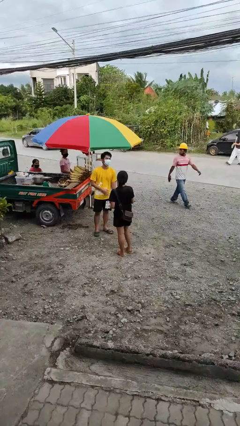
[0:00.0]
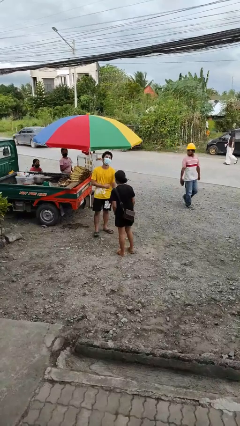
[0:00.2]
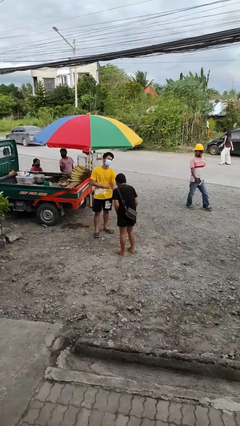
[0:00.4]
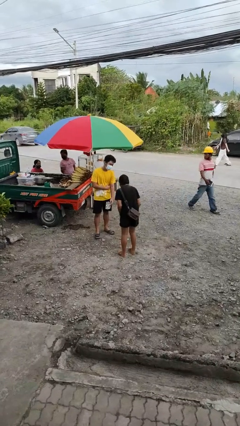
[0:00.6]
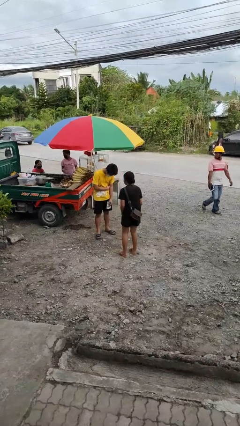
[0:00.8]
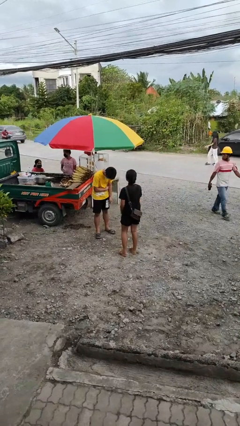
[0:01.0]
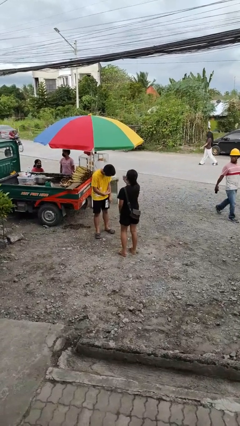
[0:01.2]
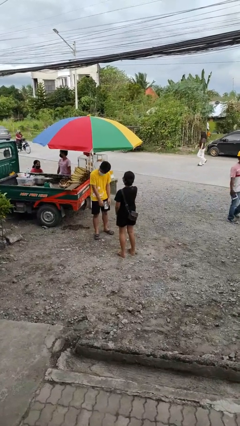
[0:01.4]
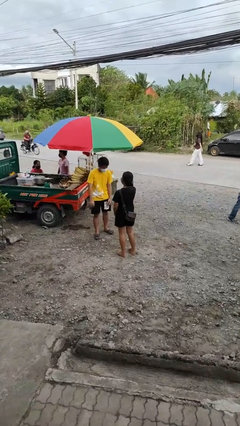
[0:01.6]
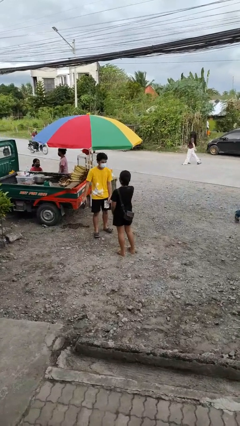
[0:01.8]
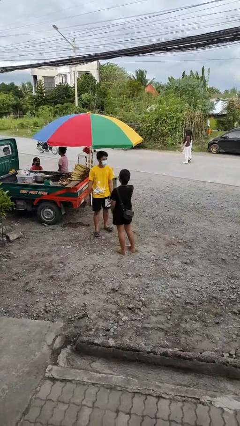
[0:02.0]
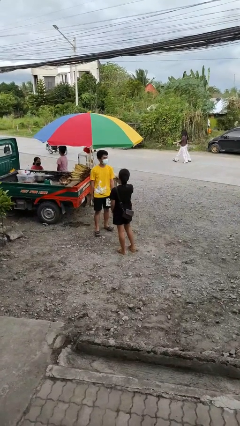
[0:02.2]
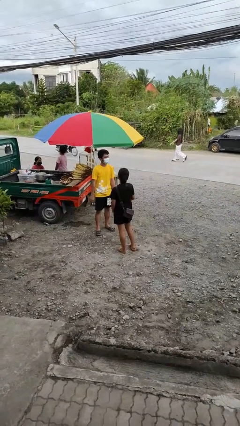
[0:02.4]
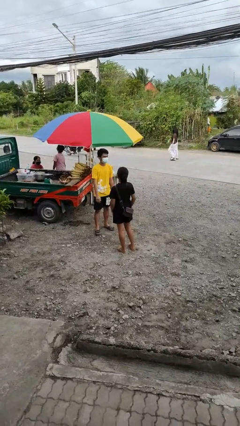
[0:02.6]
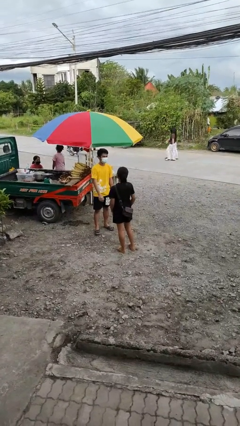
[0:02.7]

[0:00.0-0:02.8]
person laughs with person

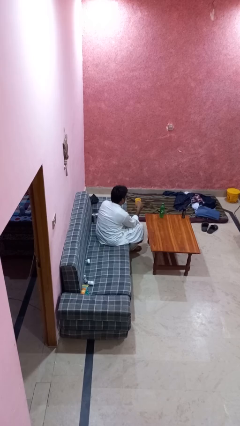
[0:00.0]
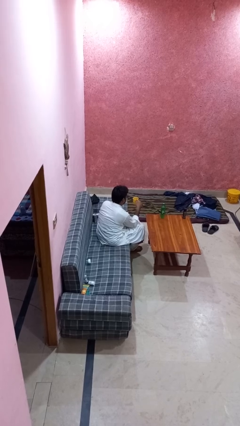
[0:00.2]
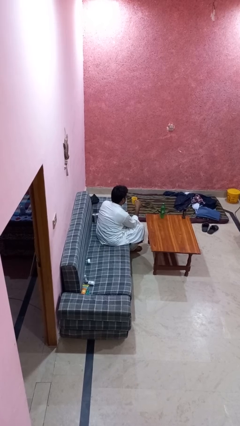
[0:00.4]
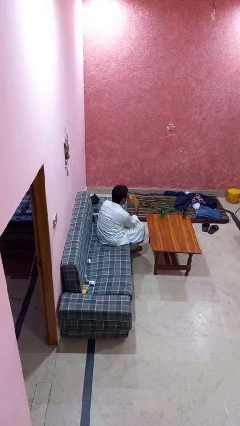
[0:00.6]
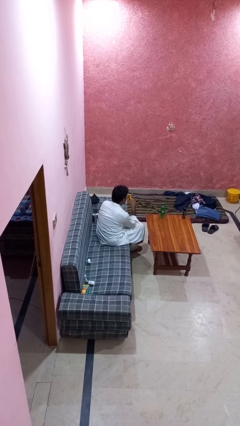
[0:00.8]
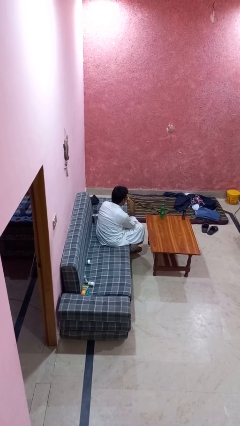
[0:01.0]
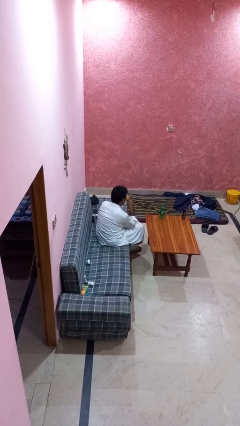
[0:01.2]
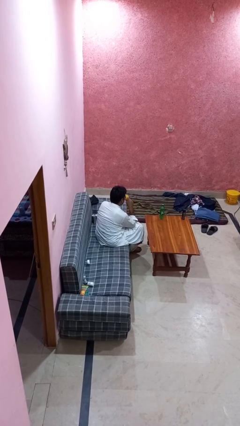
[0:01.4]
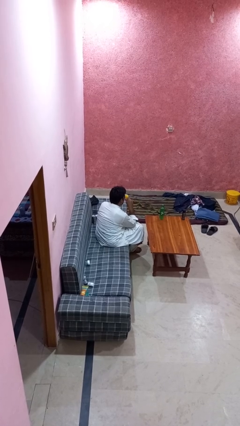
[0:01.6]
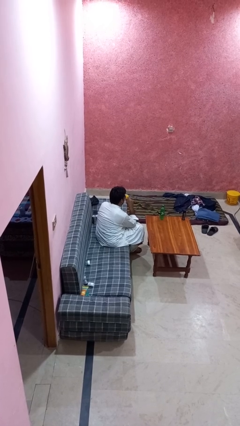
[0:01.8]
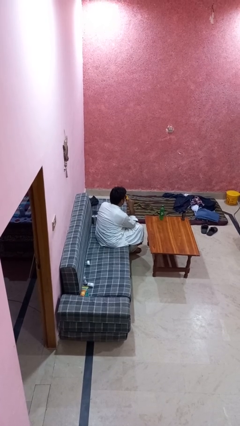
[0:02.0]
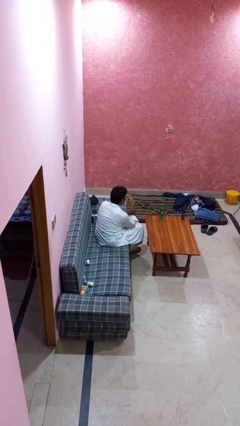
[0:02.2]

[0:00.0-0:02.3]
person drinks from mug

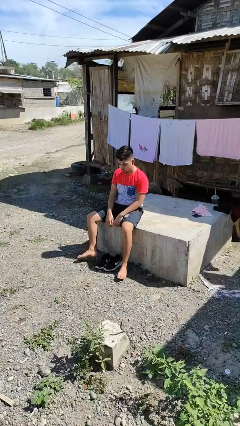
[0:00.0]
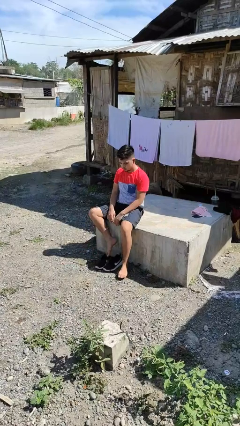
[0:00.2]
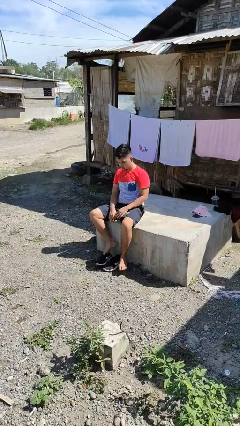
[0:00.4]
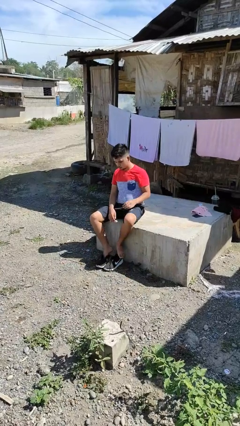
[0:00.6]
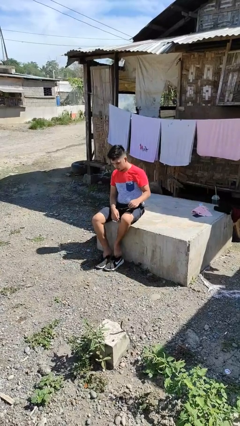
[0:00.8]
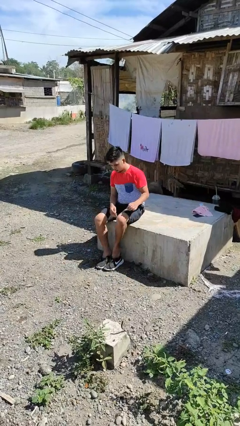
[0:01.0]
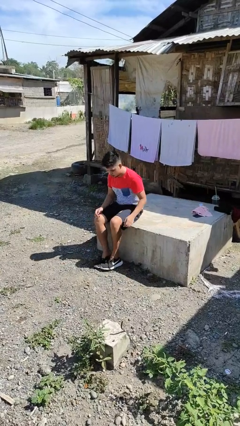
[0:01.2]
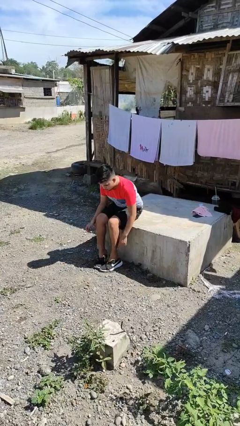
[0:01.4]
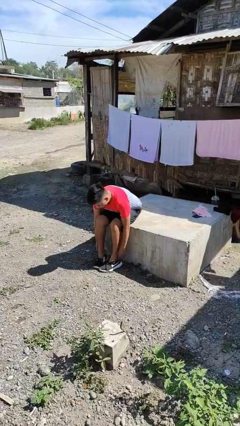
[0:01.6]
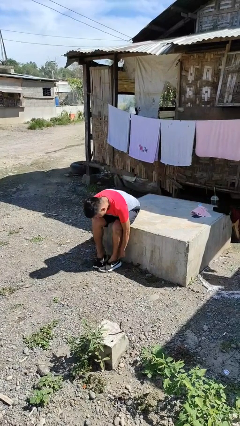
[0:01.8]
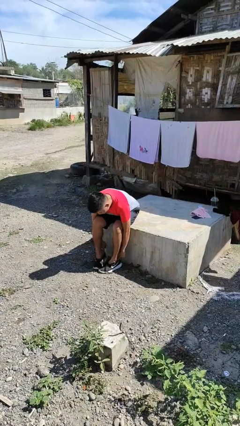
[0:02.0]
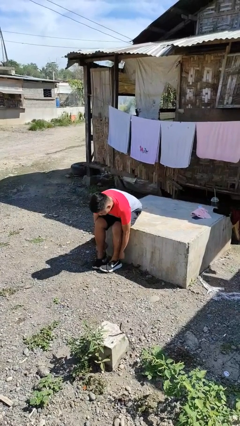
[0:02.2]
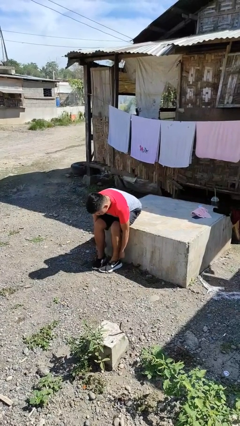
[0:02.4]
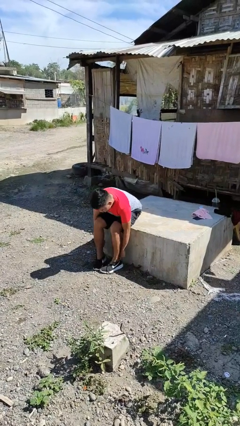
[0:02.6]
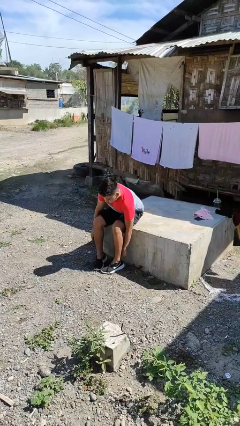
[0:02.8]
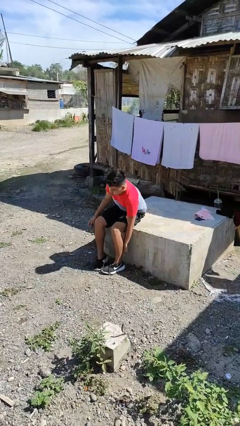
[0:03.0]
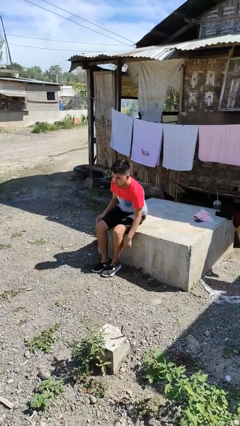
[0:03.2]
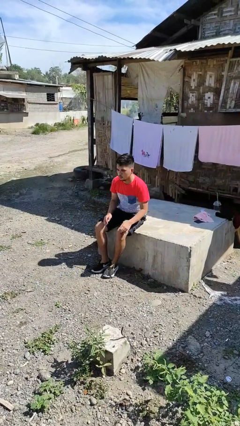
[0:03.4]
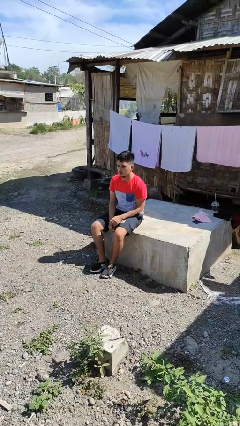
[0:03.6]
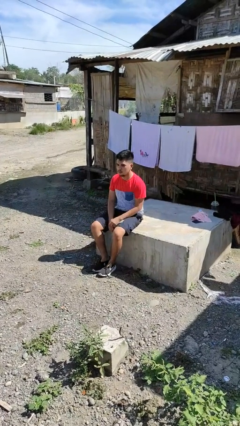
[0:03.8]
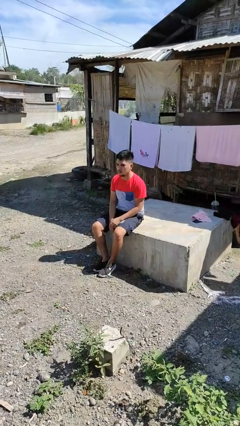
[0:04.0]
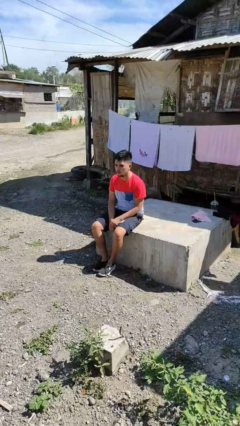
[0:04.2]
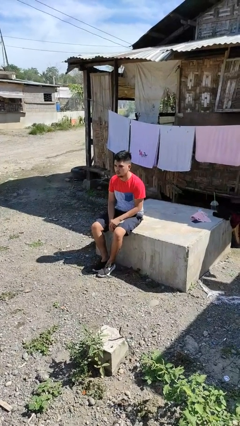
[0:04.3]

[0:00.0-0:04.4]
person puts on shoes

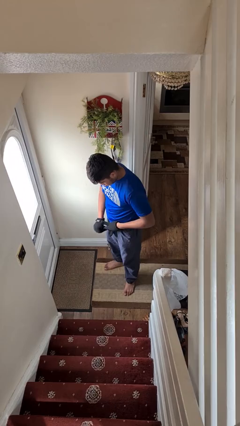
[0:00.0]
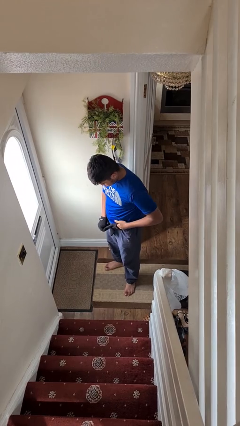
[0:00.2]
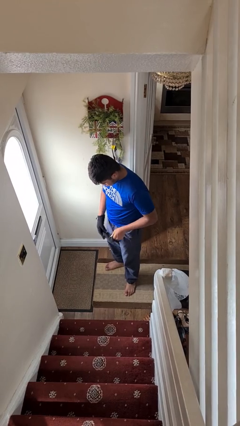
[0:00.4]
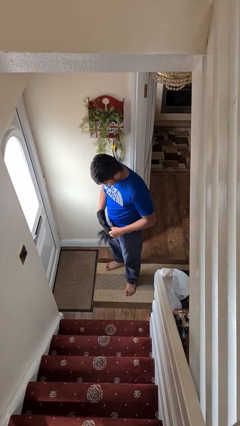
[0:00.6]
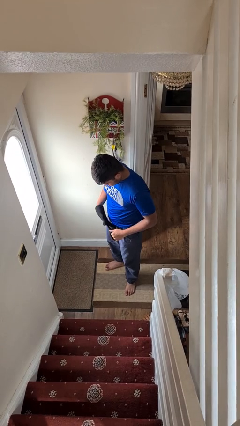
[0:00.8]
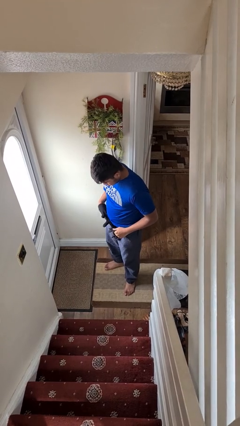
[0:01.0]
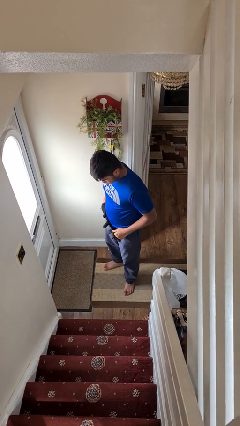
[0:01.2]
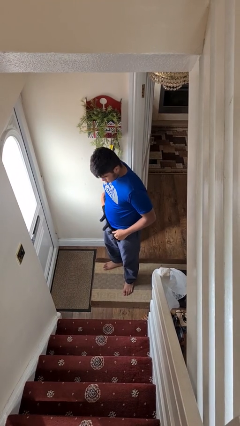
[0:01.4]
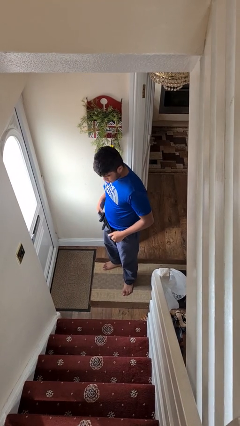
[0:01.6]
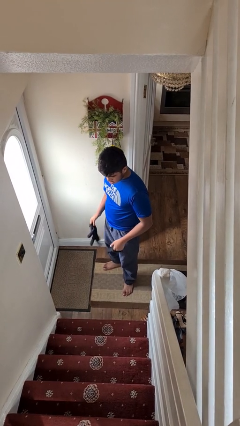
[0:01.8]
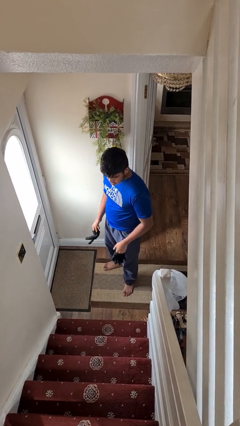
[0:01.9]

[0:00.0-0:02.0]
person takes off gloves

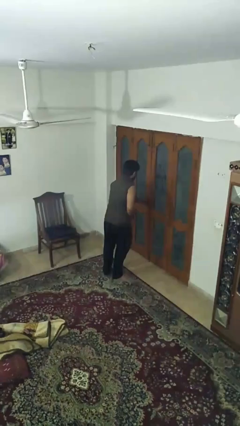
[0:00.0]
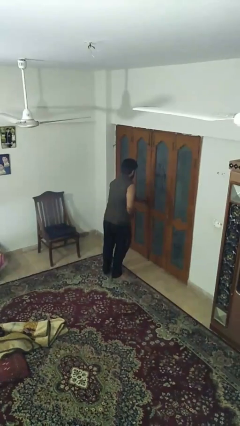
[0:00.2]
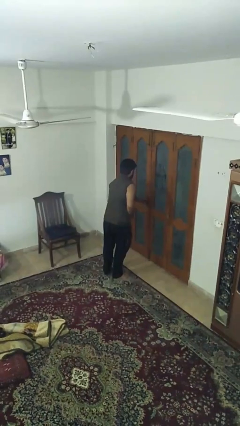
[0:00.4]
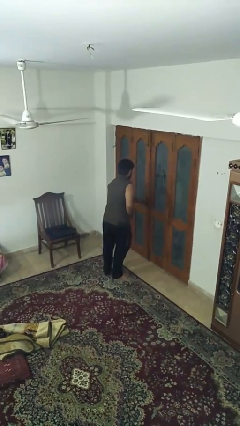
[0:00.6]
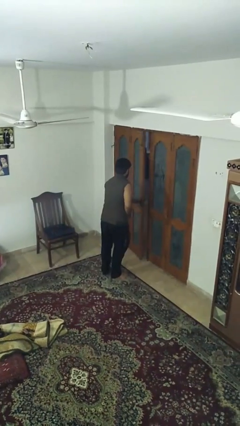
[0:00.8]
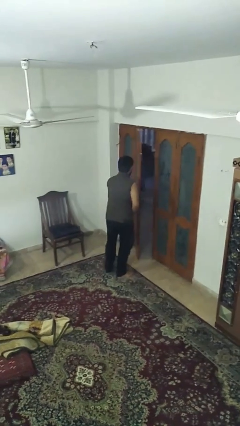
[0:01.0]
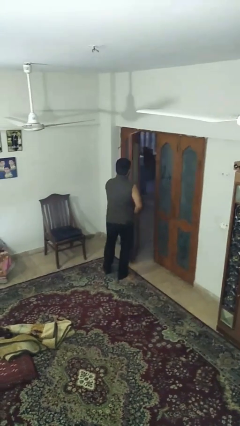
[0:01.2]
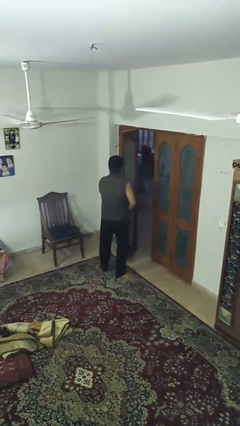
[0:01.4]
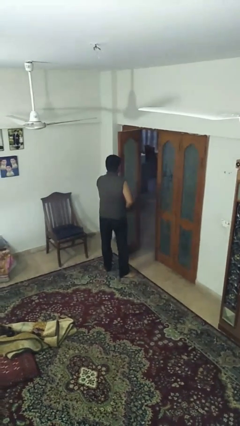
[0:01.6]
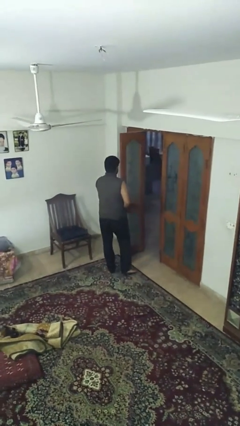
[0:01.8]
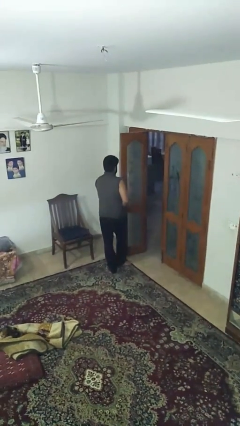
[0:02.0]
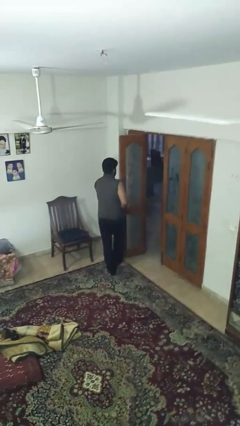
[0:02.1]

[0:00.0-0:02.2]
person opens facility door

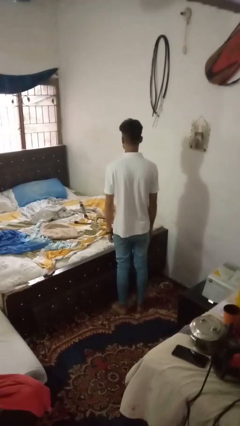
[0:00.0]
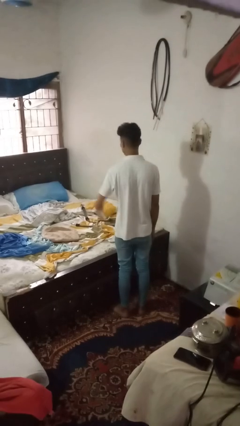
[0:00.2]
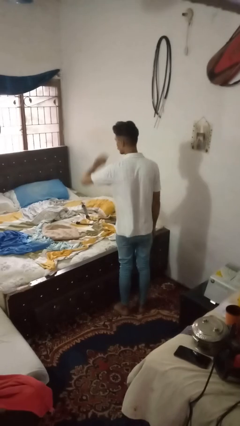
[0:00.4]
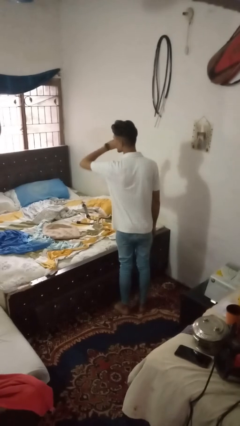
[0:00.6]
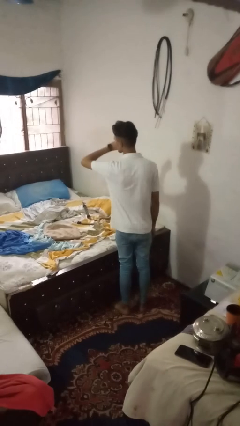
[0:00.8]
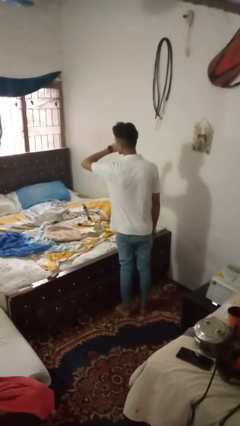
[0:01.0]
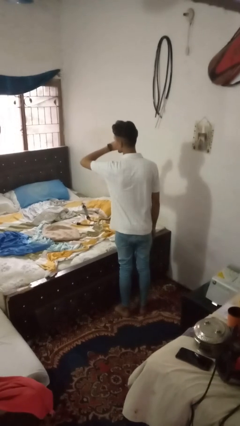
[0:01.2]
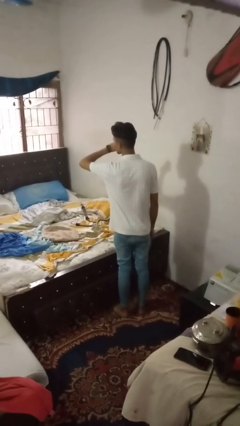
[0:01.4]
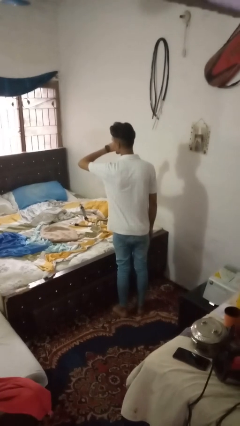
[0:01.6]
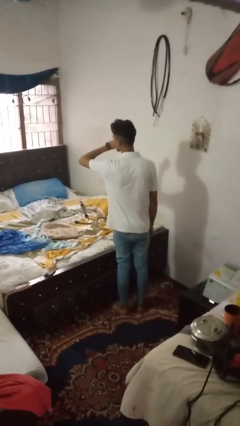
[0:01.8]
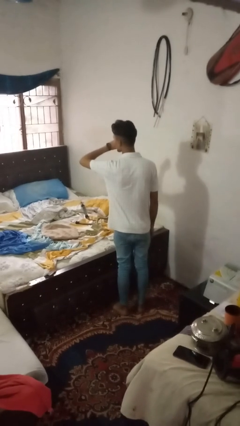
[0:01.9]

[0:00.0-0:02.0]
person gestures watch closely

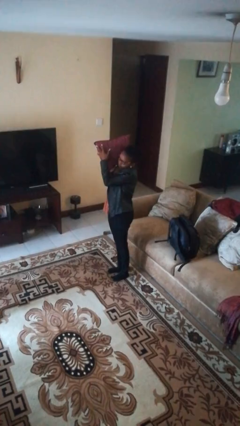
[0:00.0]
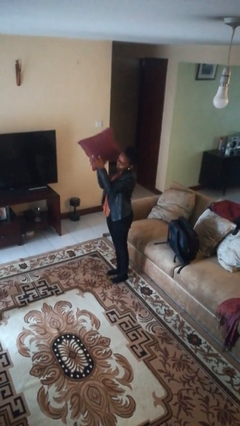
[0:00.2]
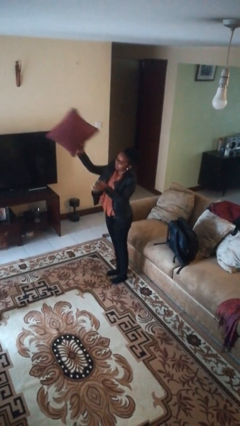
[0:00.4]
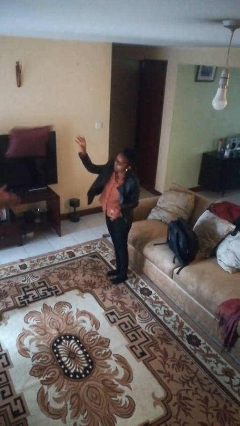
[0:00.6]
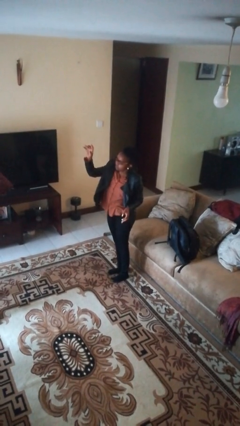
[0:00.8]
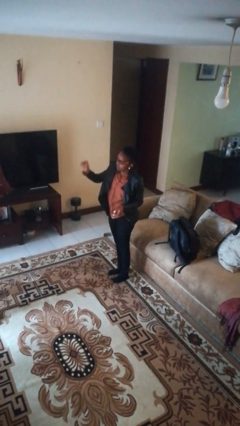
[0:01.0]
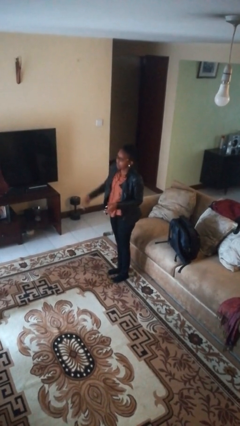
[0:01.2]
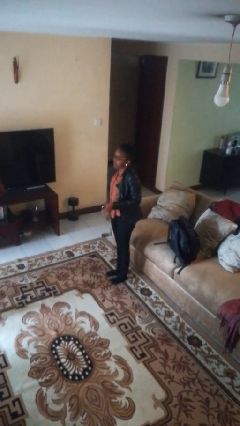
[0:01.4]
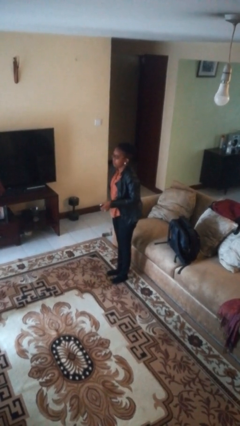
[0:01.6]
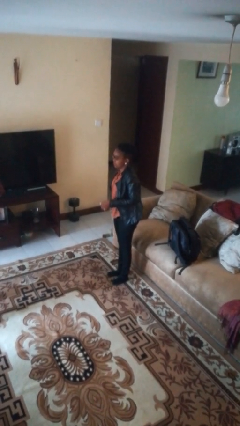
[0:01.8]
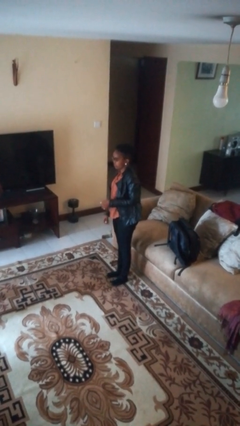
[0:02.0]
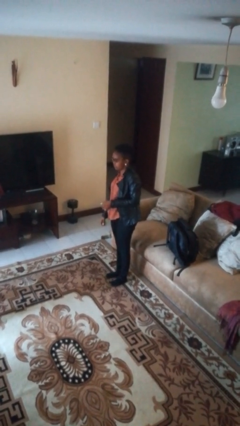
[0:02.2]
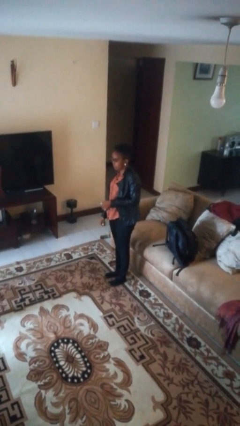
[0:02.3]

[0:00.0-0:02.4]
person throws object to person
